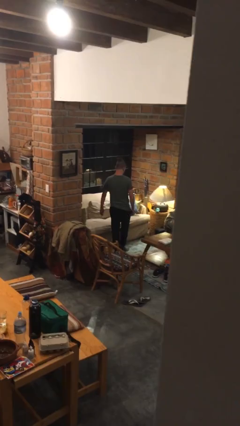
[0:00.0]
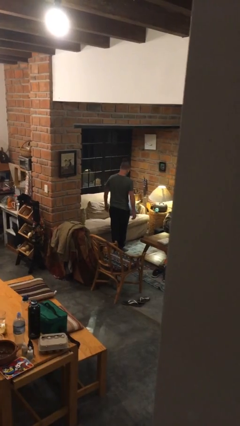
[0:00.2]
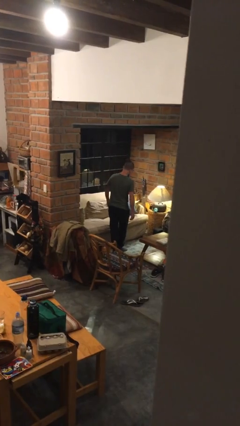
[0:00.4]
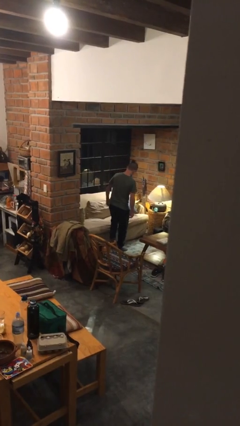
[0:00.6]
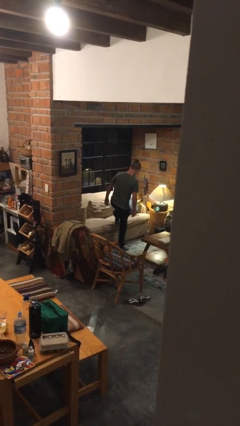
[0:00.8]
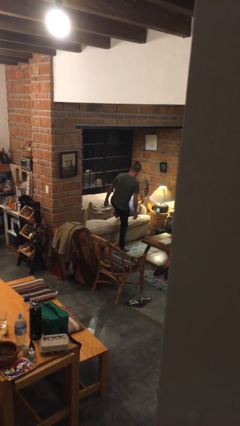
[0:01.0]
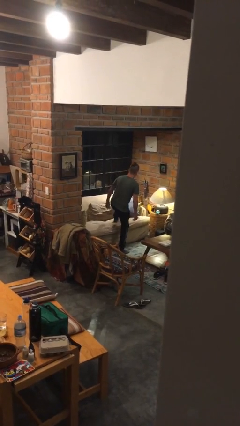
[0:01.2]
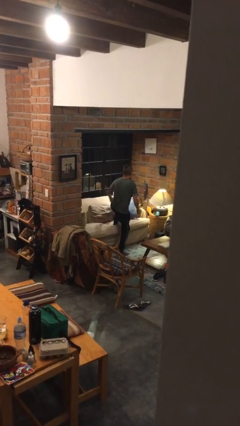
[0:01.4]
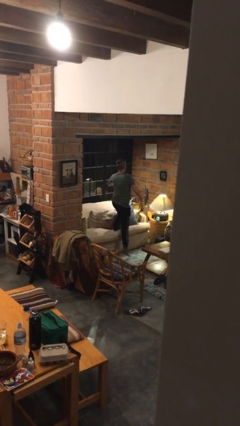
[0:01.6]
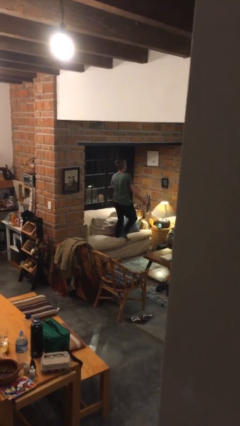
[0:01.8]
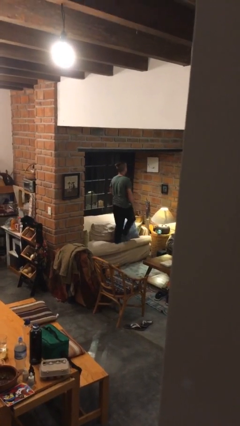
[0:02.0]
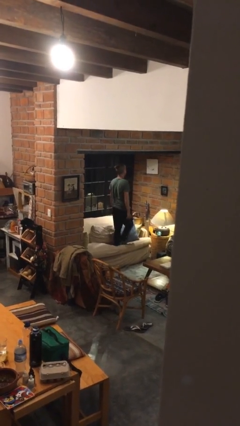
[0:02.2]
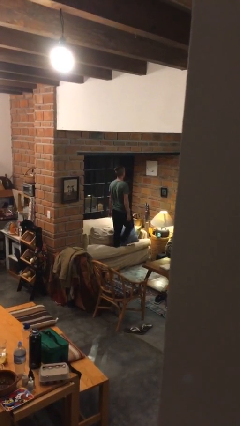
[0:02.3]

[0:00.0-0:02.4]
person climbs on couch

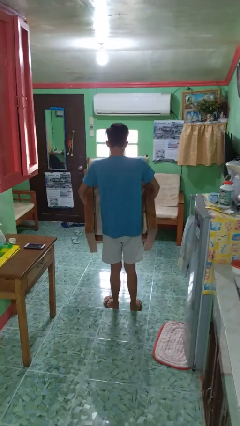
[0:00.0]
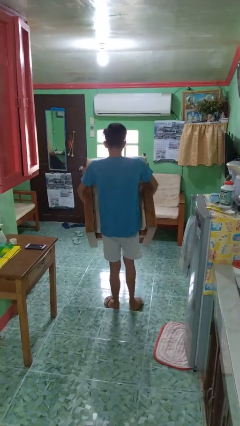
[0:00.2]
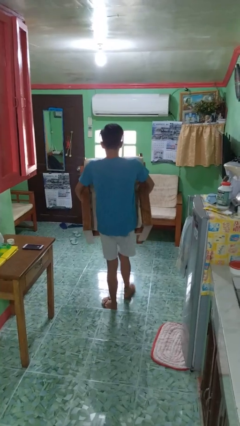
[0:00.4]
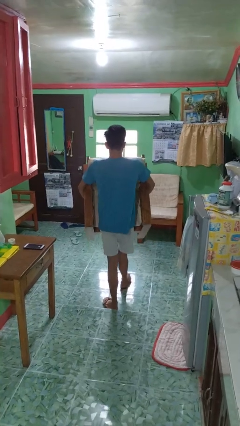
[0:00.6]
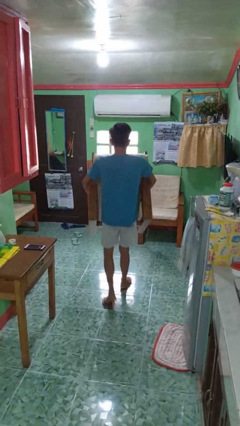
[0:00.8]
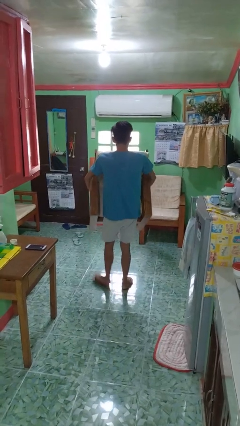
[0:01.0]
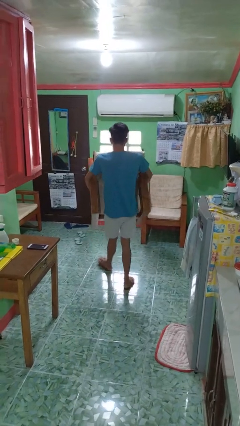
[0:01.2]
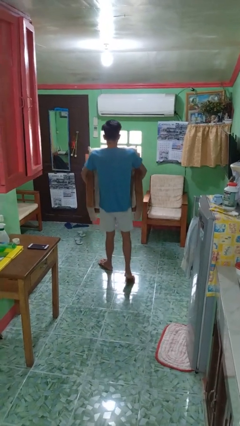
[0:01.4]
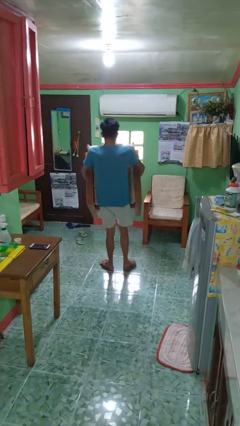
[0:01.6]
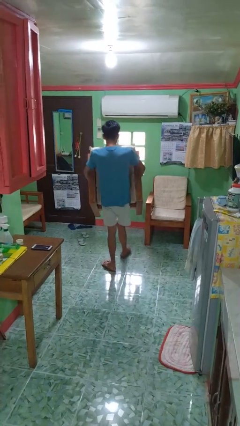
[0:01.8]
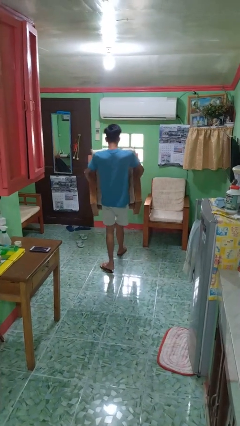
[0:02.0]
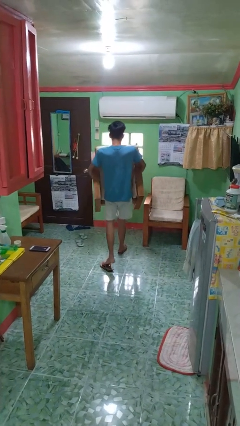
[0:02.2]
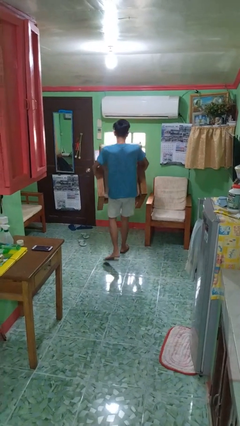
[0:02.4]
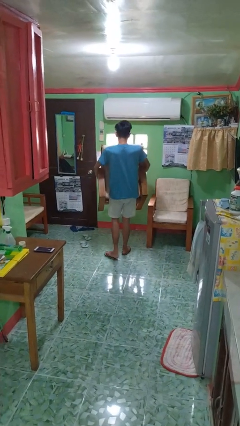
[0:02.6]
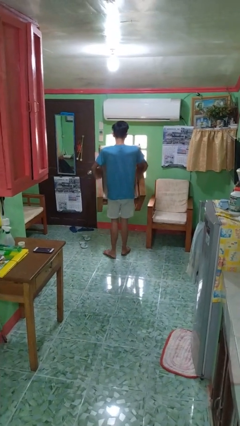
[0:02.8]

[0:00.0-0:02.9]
person carries furniture

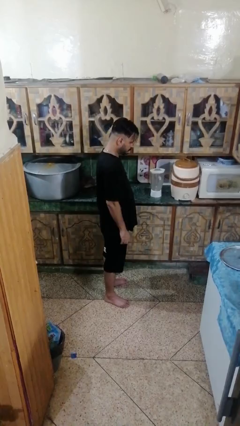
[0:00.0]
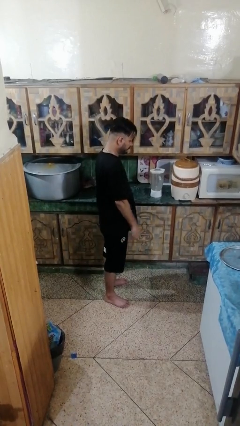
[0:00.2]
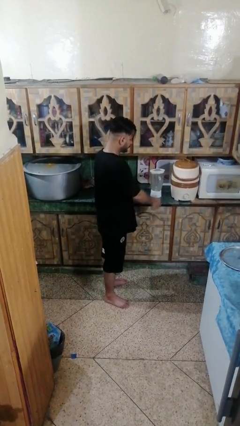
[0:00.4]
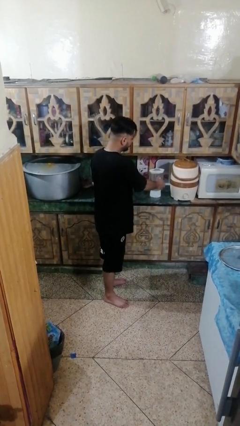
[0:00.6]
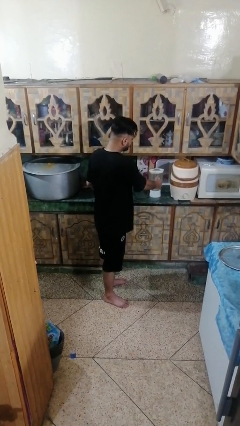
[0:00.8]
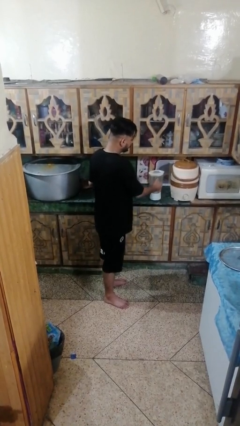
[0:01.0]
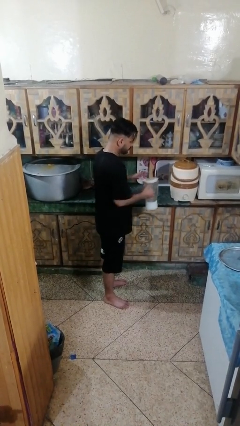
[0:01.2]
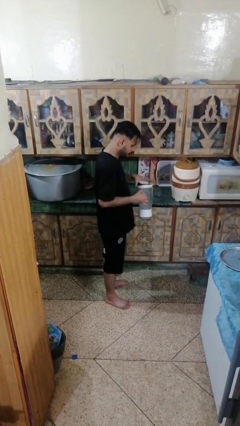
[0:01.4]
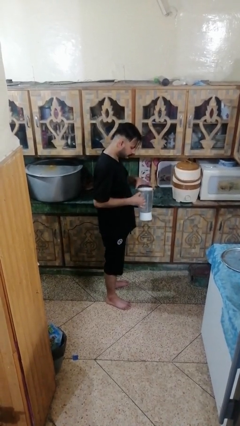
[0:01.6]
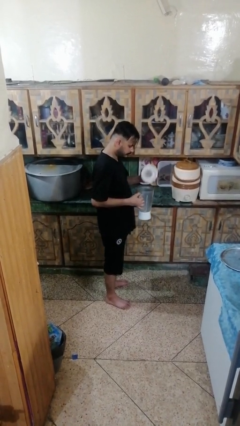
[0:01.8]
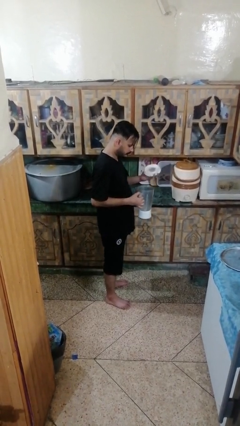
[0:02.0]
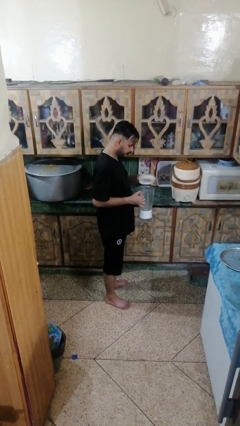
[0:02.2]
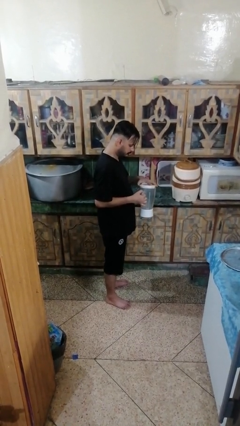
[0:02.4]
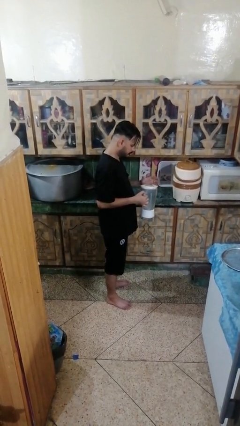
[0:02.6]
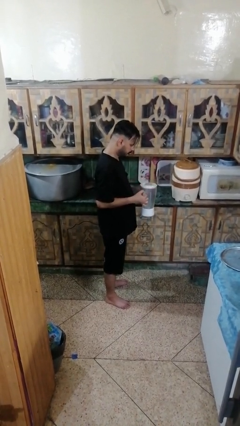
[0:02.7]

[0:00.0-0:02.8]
person picks up object from countertop

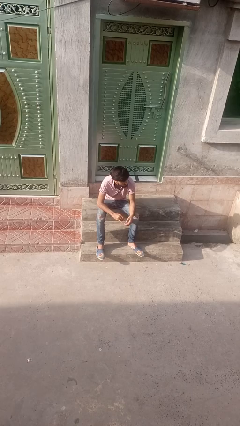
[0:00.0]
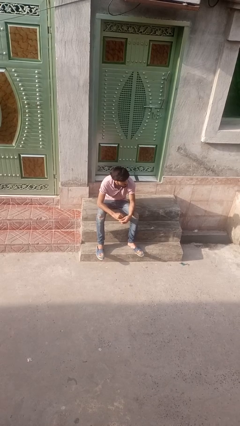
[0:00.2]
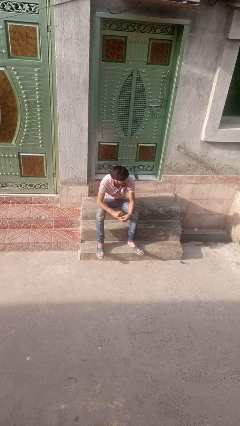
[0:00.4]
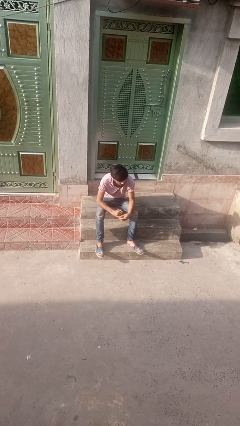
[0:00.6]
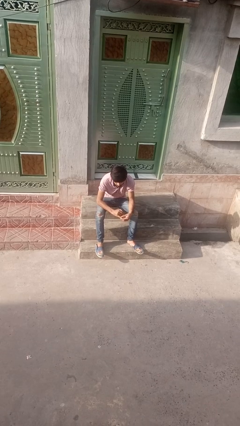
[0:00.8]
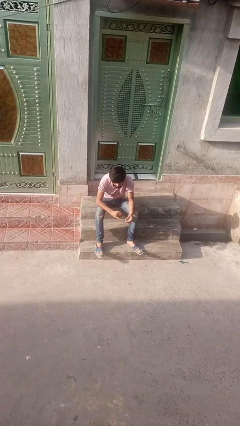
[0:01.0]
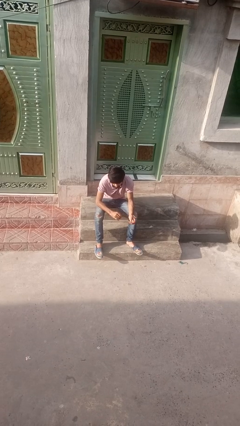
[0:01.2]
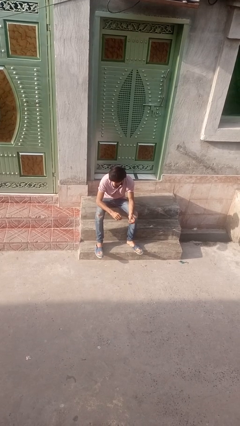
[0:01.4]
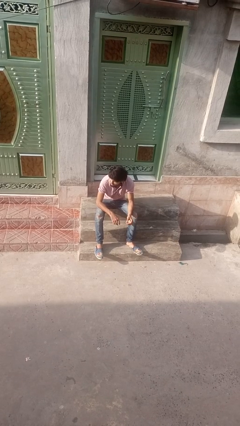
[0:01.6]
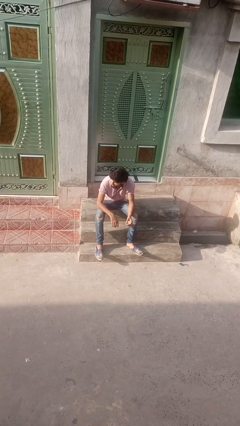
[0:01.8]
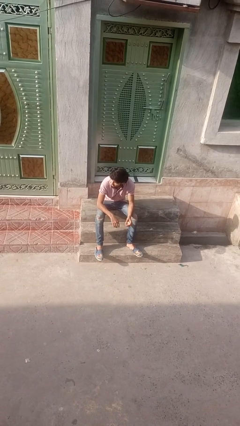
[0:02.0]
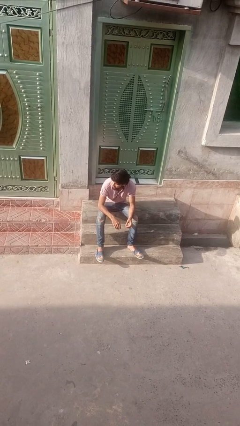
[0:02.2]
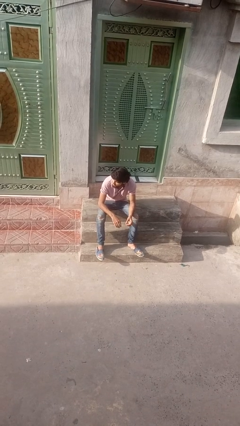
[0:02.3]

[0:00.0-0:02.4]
person takes off ring

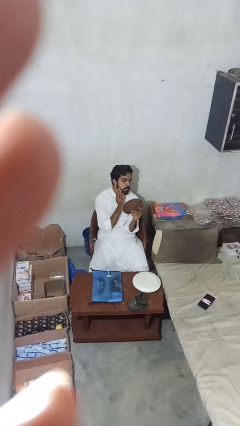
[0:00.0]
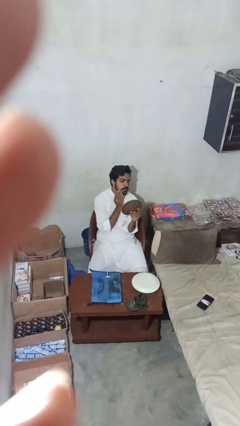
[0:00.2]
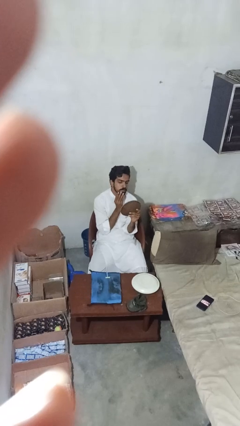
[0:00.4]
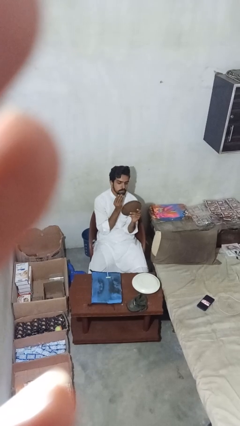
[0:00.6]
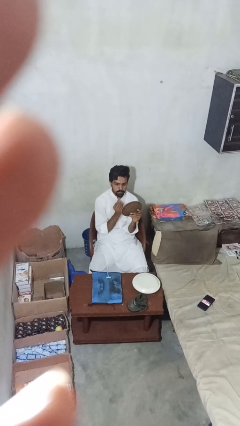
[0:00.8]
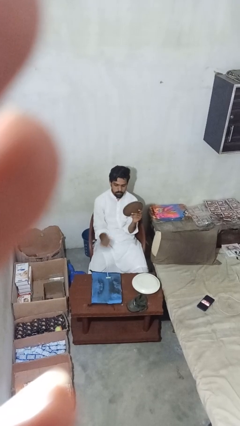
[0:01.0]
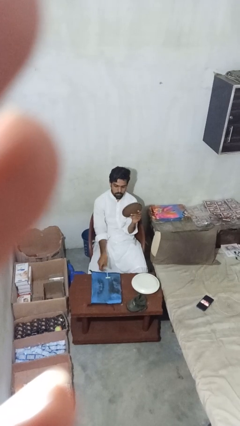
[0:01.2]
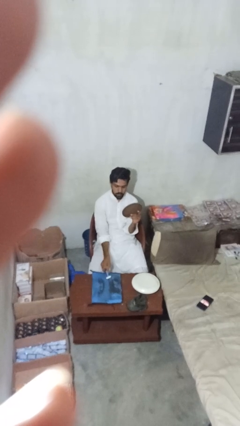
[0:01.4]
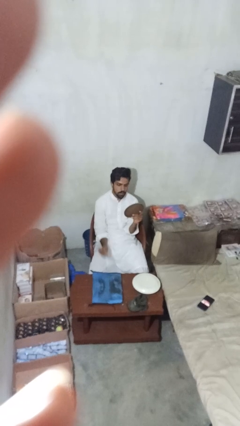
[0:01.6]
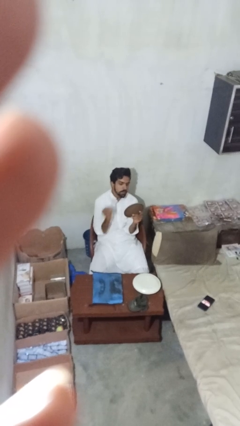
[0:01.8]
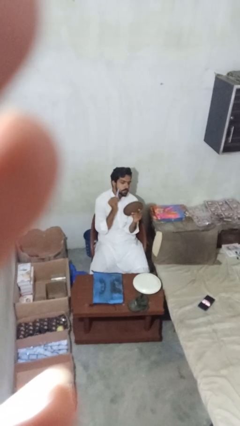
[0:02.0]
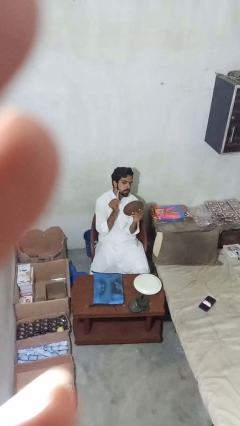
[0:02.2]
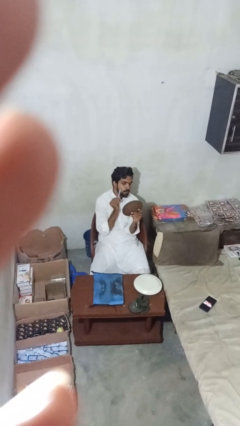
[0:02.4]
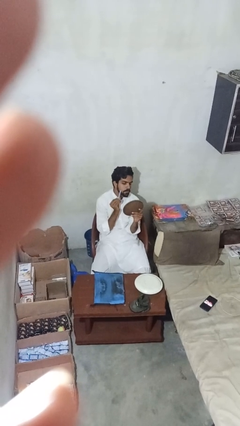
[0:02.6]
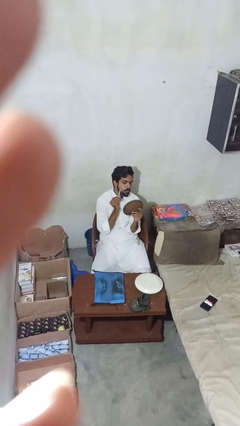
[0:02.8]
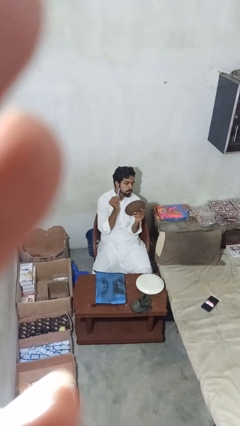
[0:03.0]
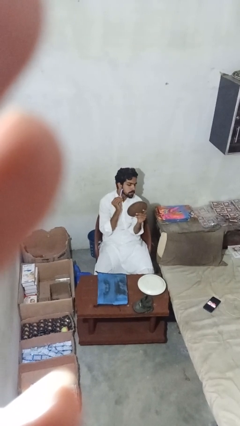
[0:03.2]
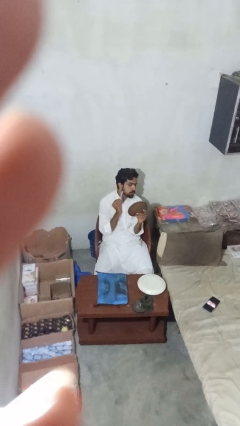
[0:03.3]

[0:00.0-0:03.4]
person shaves face

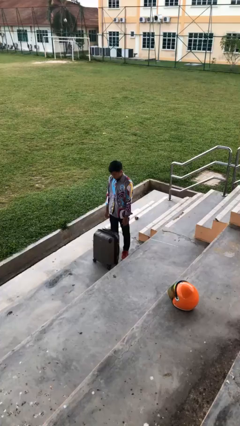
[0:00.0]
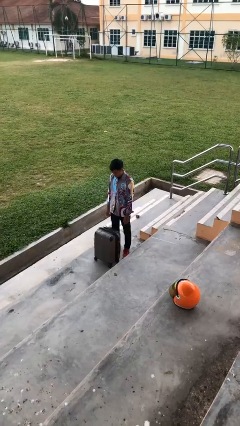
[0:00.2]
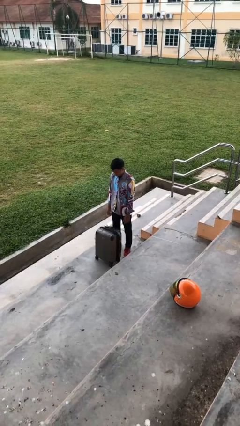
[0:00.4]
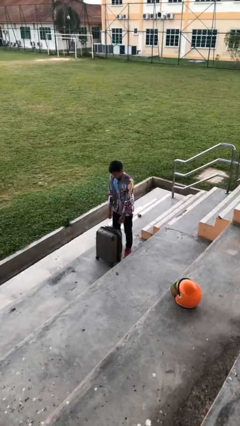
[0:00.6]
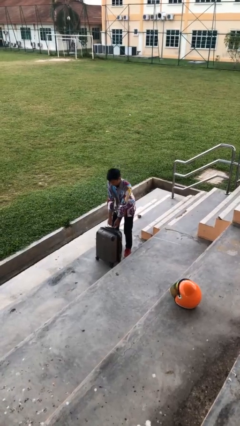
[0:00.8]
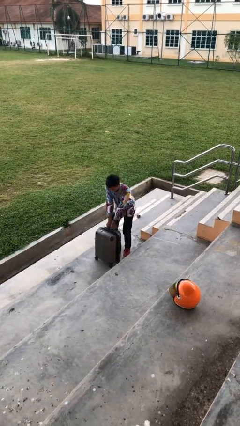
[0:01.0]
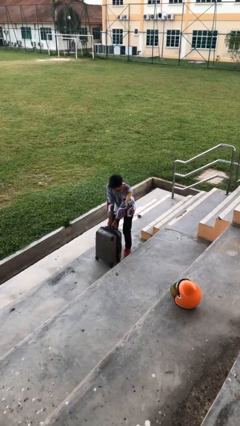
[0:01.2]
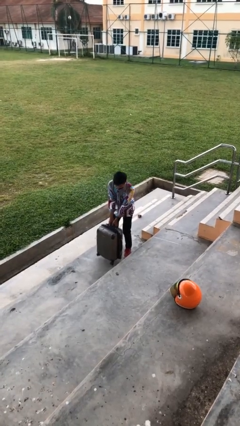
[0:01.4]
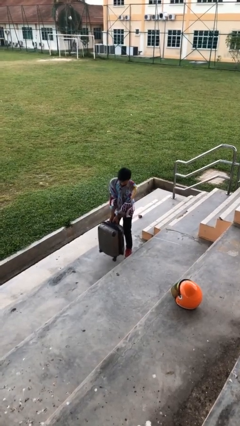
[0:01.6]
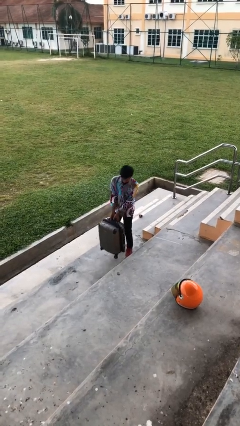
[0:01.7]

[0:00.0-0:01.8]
person picks up object from floor

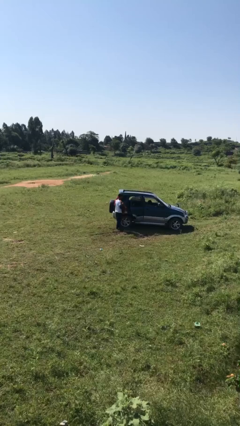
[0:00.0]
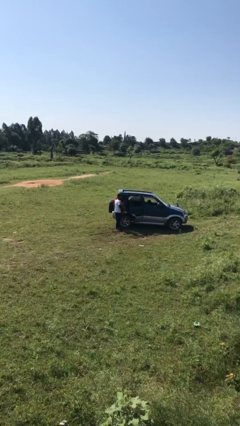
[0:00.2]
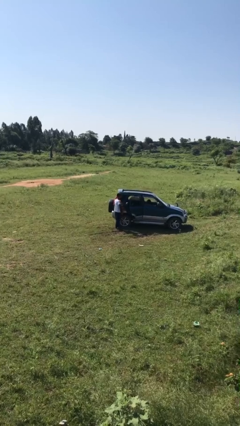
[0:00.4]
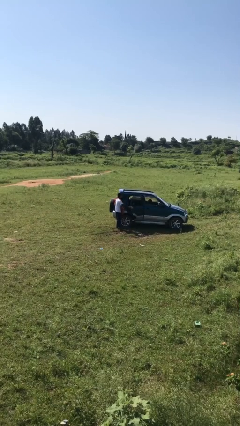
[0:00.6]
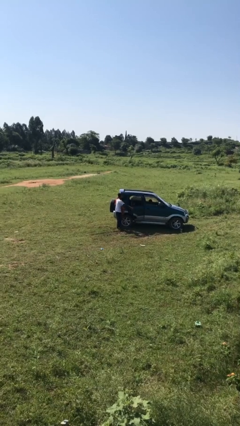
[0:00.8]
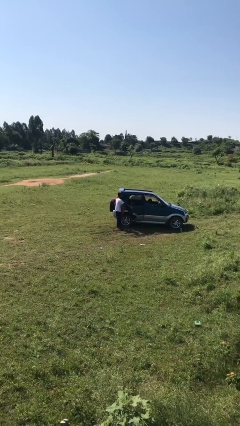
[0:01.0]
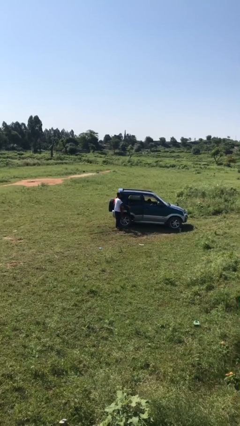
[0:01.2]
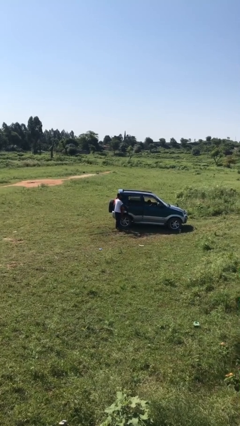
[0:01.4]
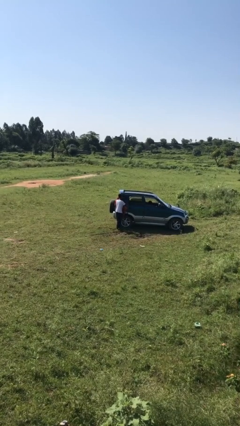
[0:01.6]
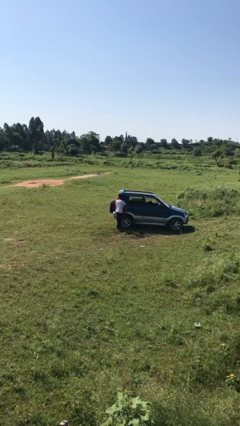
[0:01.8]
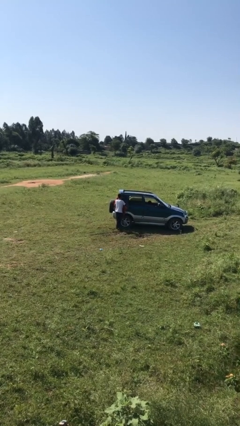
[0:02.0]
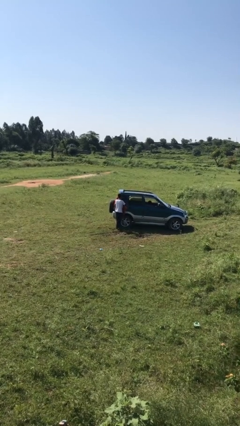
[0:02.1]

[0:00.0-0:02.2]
person closes car door
